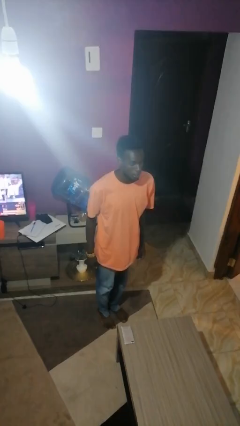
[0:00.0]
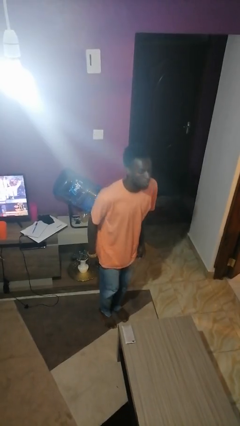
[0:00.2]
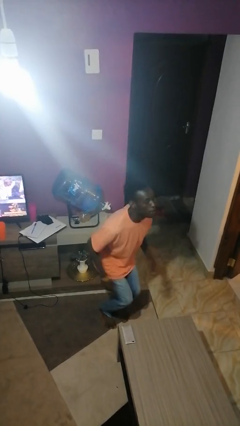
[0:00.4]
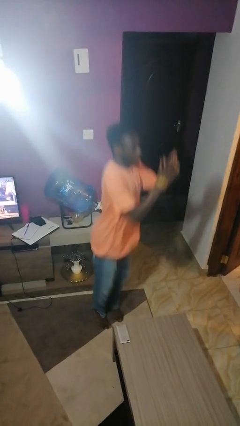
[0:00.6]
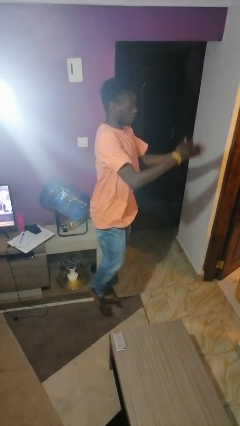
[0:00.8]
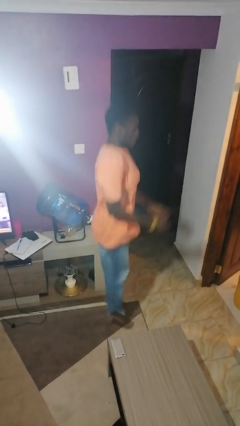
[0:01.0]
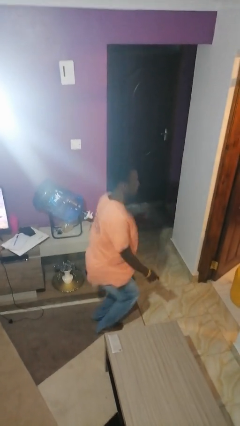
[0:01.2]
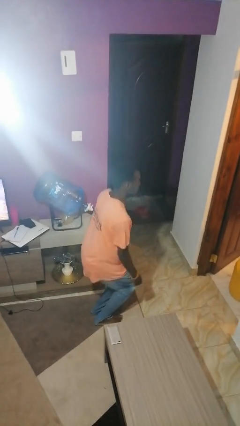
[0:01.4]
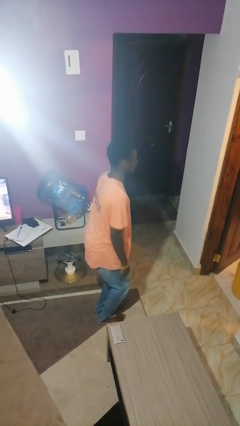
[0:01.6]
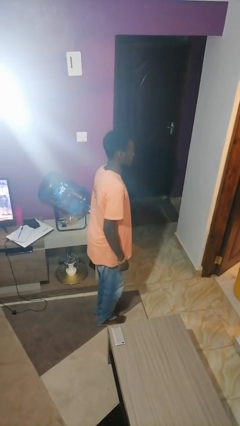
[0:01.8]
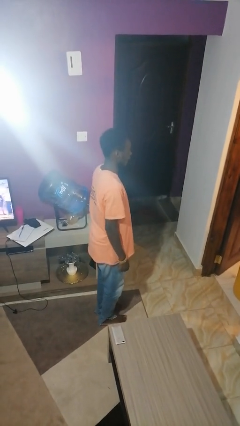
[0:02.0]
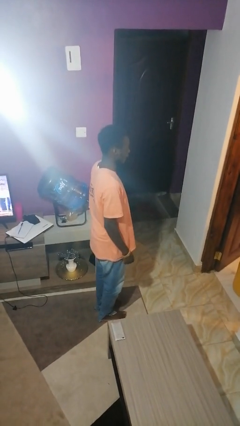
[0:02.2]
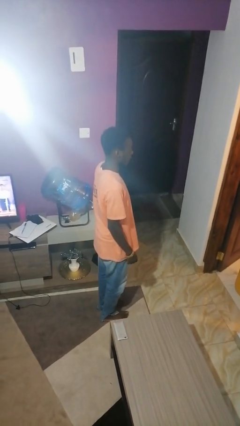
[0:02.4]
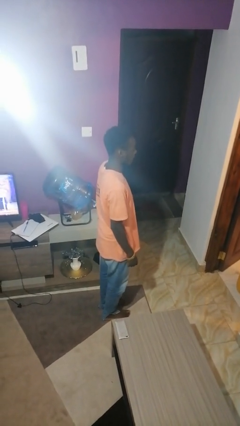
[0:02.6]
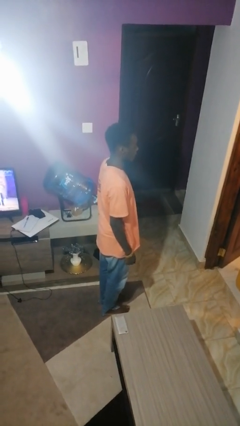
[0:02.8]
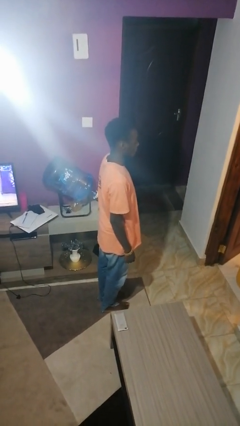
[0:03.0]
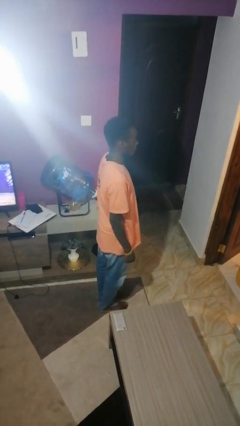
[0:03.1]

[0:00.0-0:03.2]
person jumps

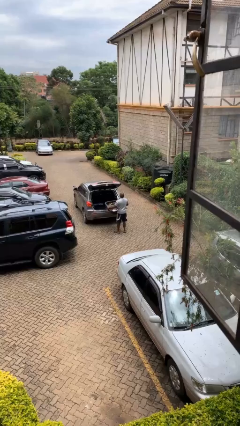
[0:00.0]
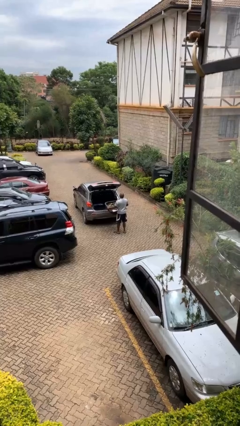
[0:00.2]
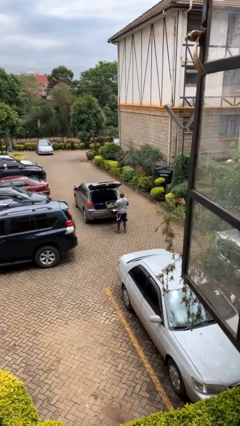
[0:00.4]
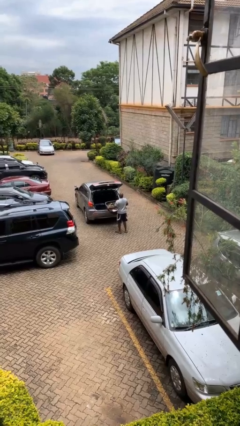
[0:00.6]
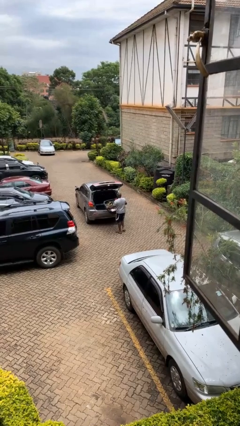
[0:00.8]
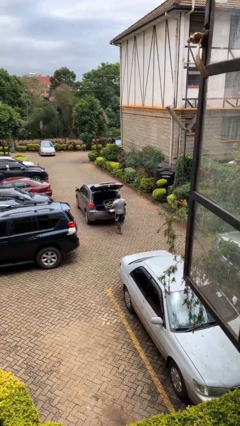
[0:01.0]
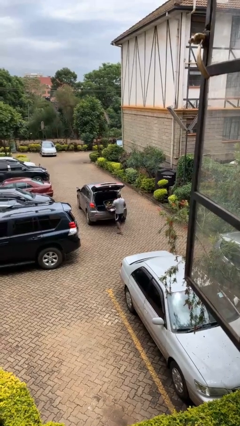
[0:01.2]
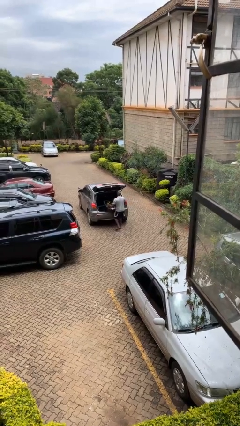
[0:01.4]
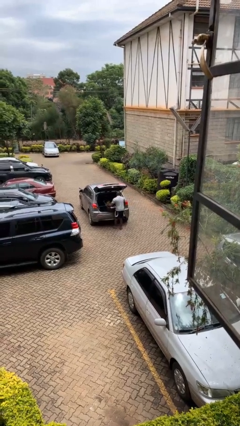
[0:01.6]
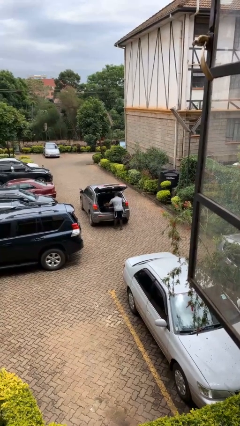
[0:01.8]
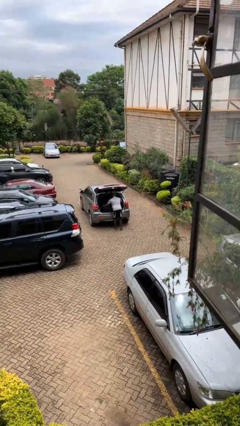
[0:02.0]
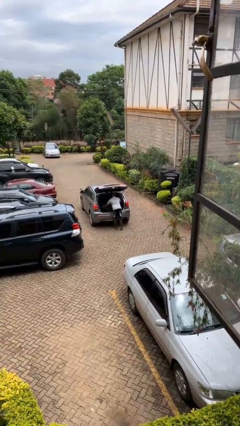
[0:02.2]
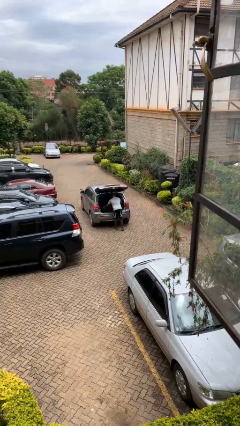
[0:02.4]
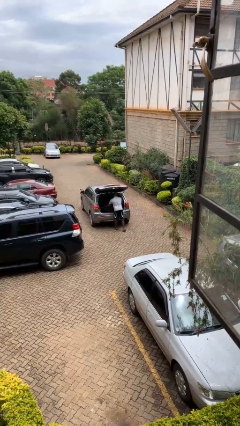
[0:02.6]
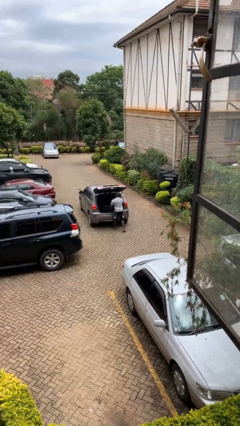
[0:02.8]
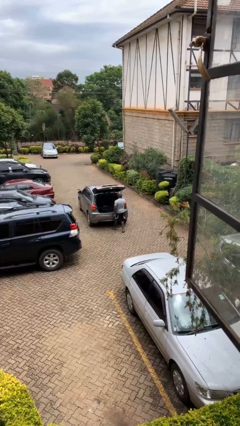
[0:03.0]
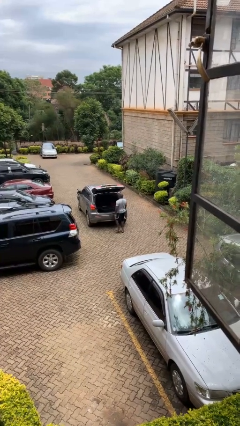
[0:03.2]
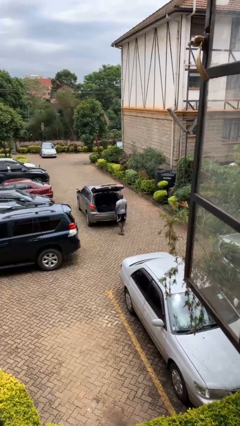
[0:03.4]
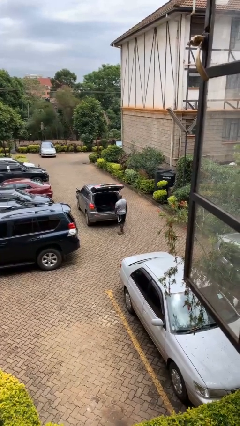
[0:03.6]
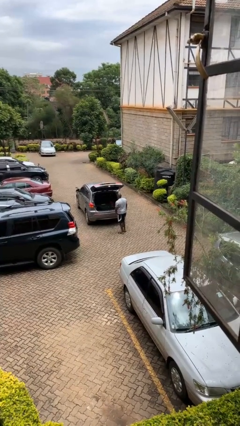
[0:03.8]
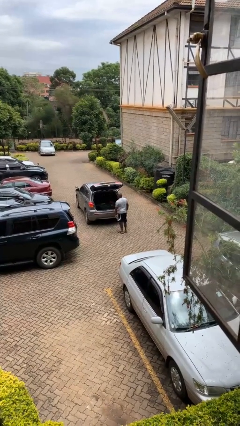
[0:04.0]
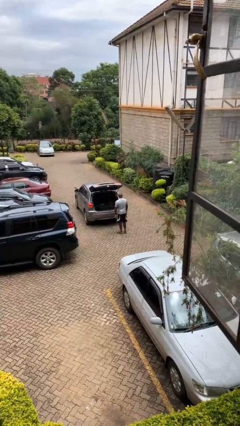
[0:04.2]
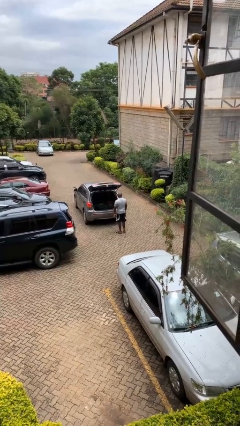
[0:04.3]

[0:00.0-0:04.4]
person loads car

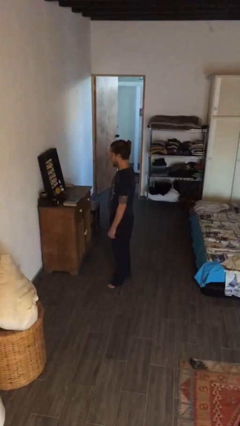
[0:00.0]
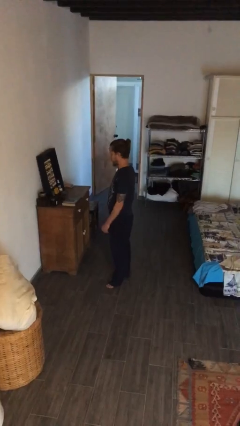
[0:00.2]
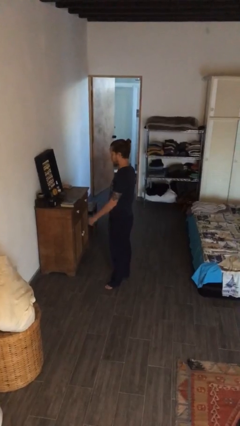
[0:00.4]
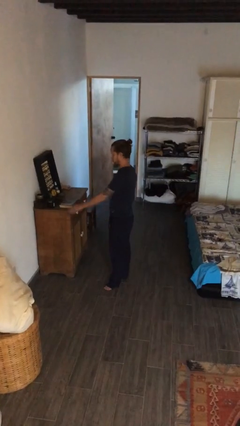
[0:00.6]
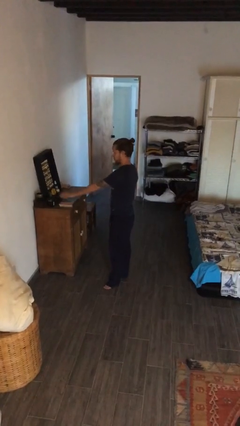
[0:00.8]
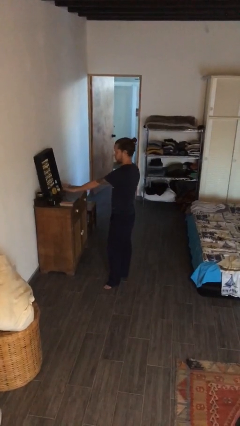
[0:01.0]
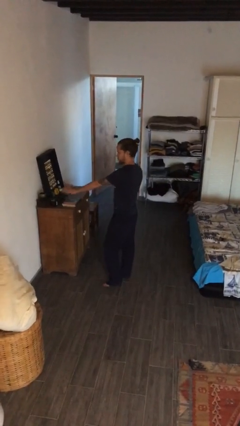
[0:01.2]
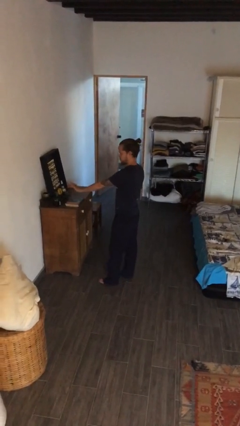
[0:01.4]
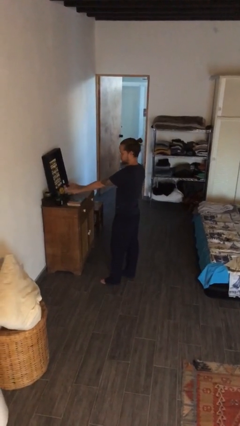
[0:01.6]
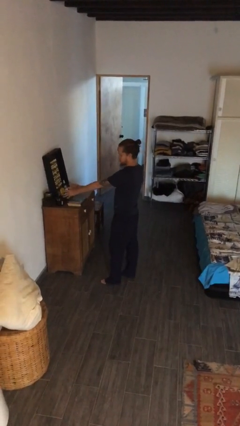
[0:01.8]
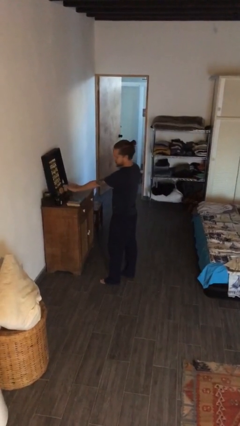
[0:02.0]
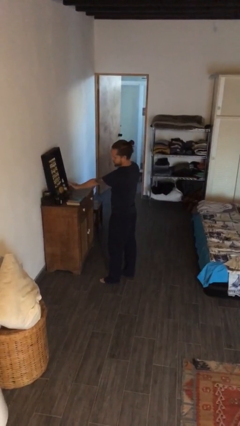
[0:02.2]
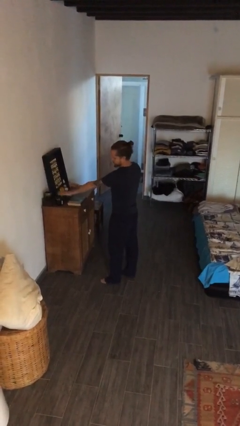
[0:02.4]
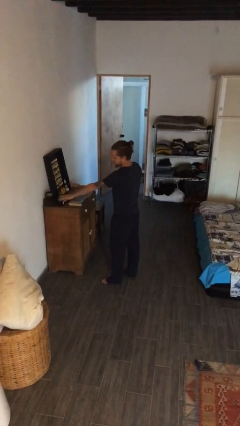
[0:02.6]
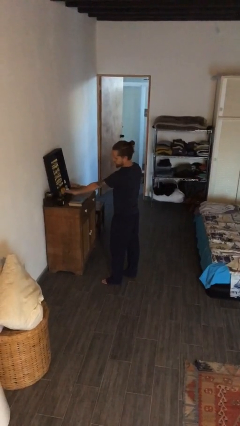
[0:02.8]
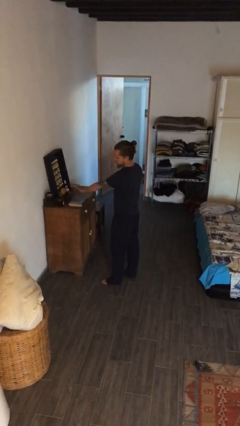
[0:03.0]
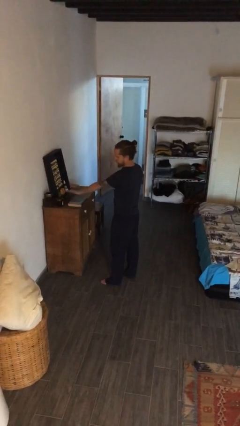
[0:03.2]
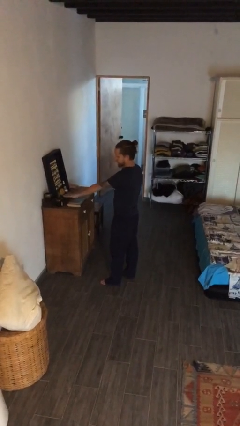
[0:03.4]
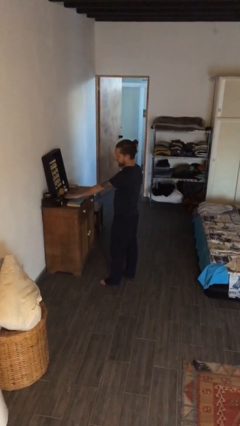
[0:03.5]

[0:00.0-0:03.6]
person waves hand over object

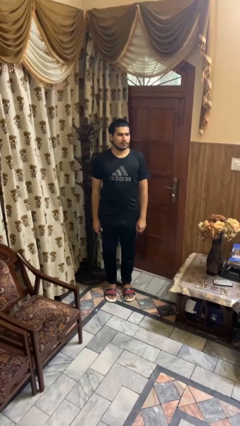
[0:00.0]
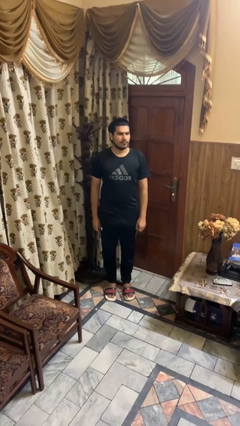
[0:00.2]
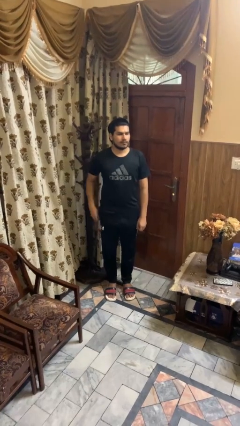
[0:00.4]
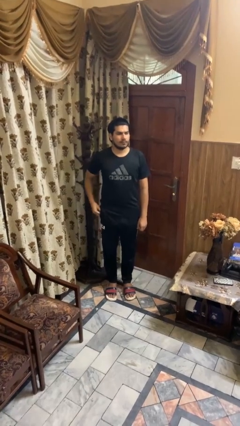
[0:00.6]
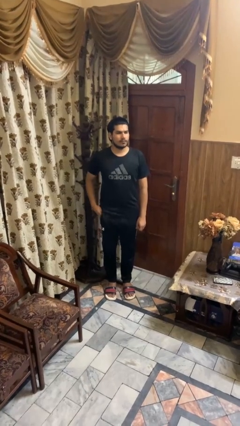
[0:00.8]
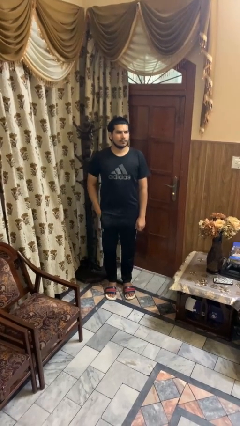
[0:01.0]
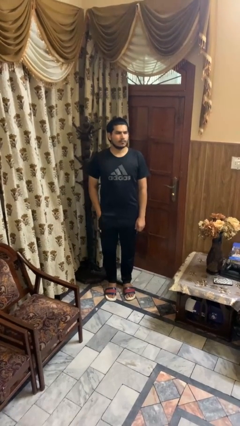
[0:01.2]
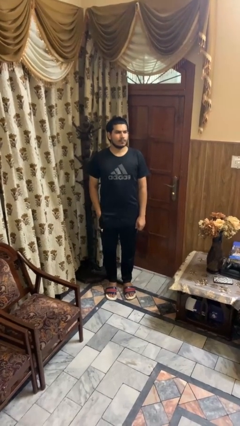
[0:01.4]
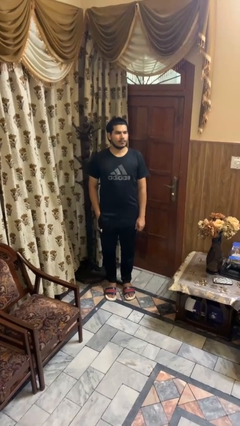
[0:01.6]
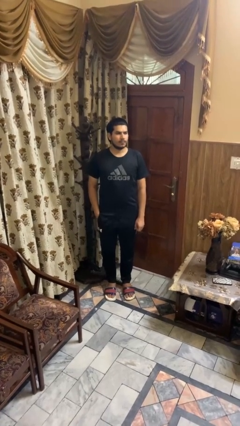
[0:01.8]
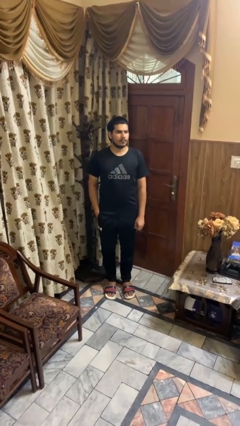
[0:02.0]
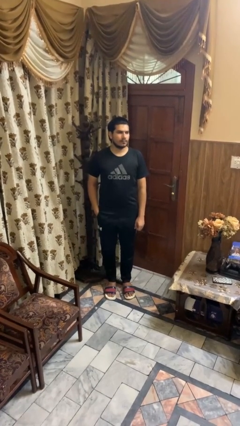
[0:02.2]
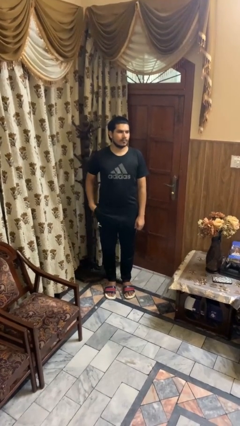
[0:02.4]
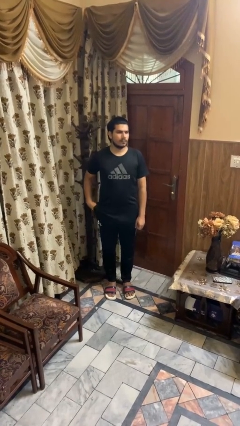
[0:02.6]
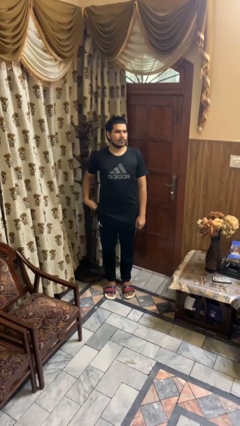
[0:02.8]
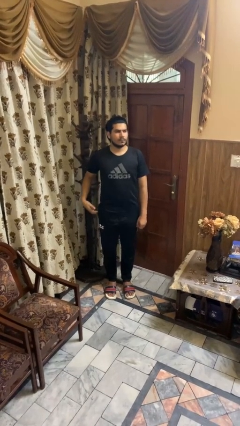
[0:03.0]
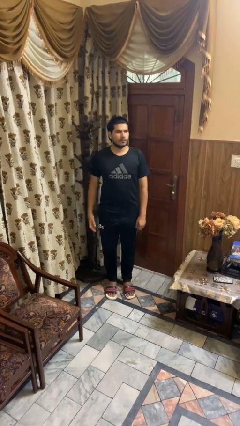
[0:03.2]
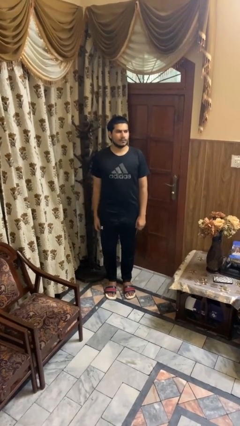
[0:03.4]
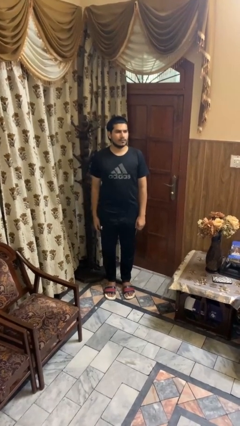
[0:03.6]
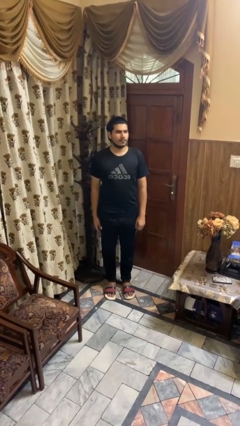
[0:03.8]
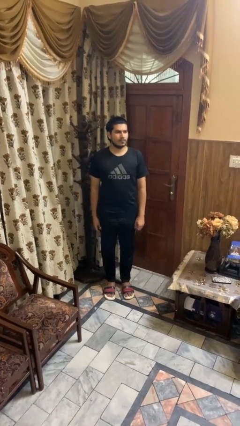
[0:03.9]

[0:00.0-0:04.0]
person puts hands in back pockets

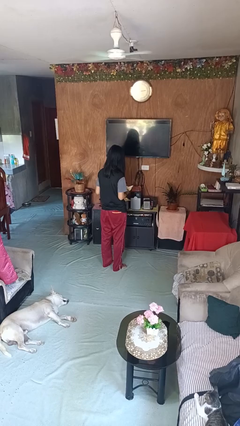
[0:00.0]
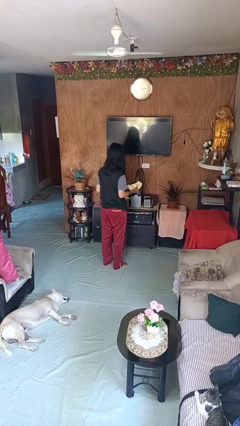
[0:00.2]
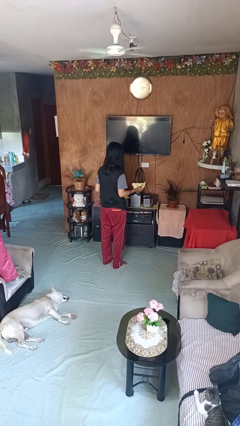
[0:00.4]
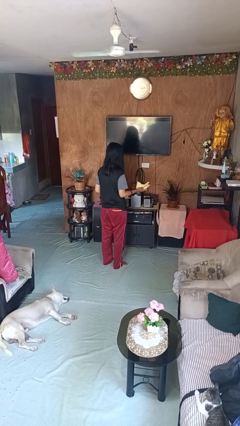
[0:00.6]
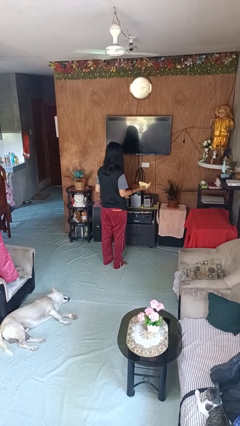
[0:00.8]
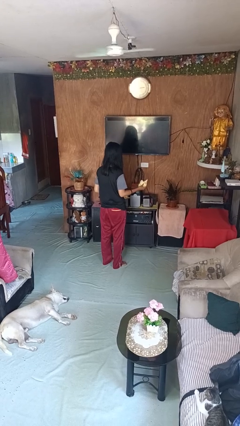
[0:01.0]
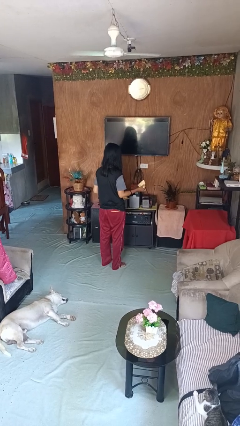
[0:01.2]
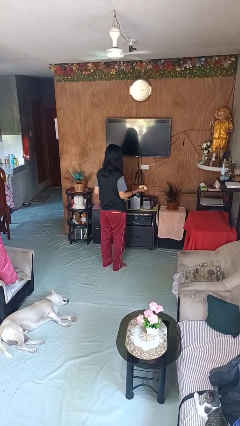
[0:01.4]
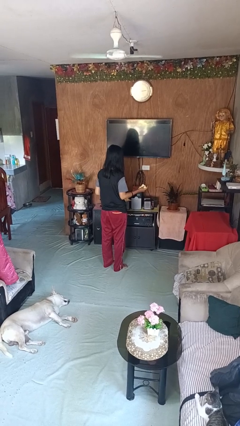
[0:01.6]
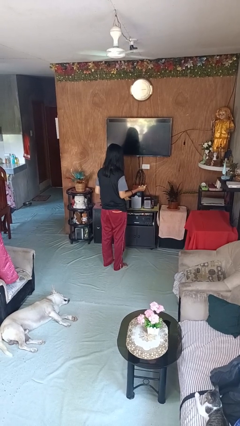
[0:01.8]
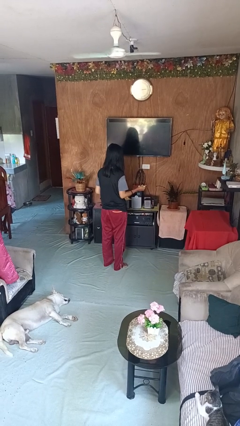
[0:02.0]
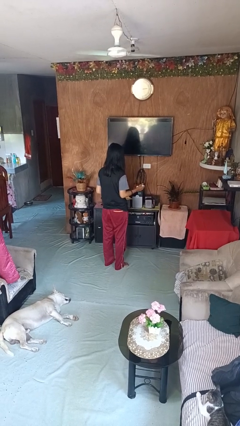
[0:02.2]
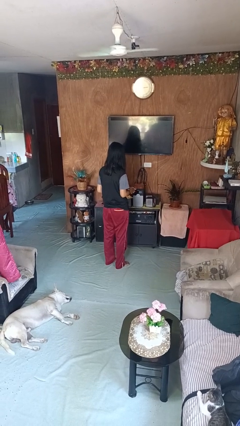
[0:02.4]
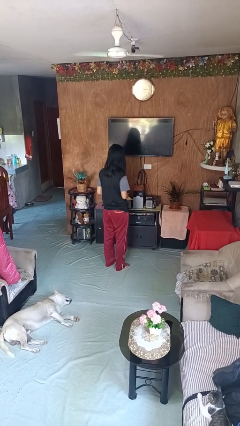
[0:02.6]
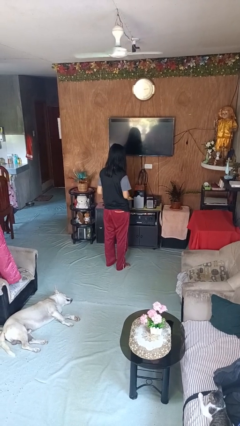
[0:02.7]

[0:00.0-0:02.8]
person crumples paper
